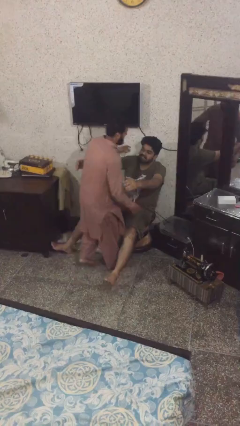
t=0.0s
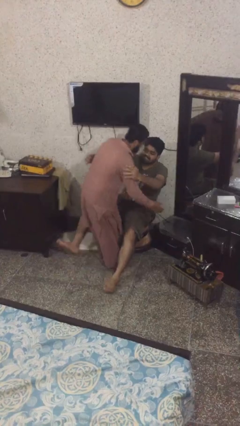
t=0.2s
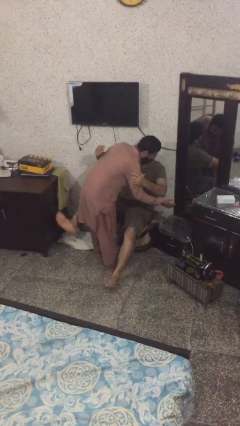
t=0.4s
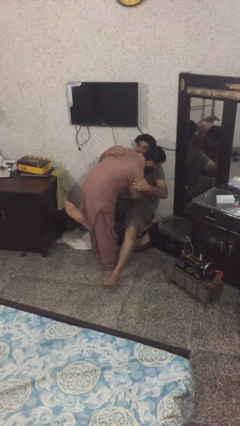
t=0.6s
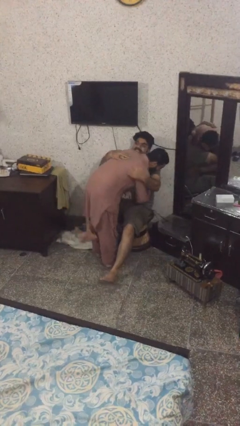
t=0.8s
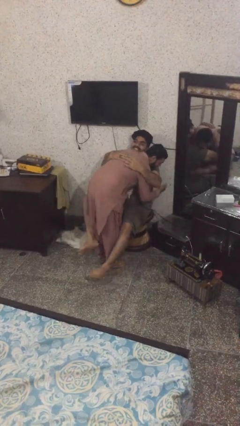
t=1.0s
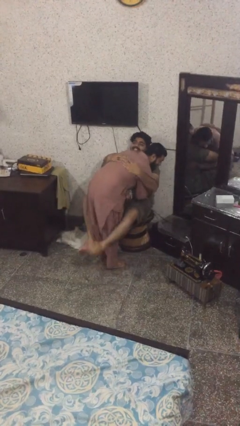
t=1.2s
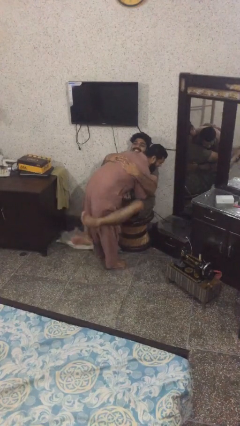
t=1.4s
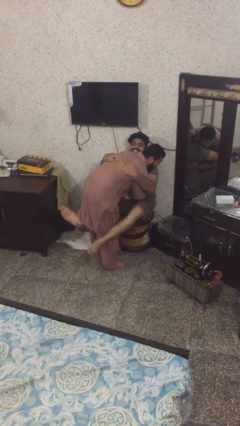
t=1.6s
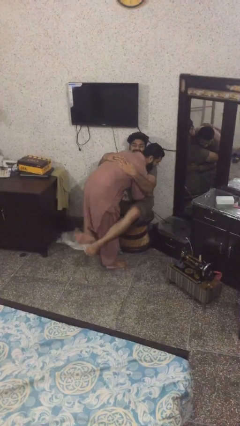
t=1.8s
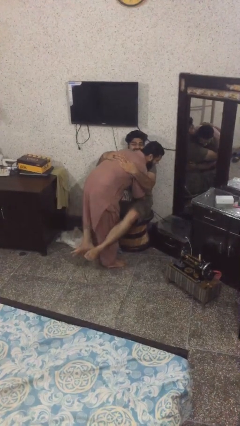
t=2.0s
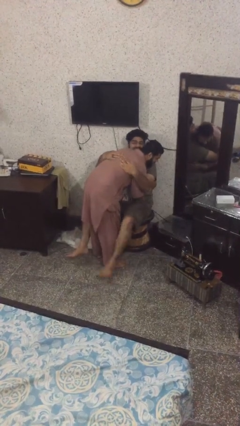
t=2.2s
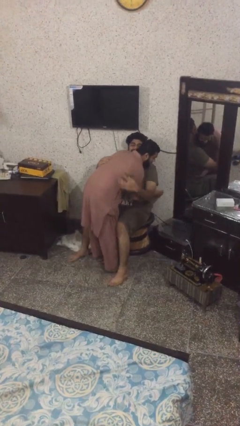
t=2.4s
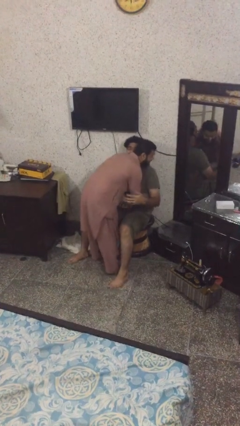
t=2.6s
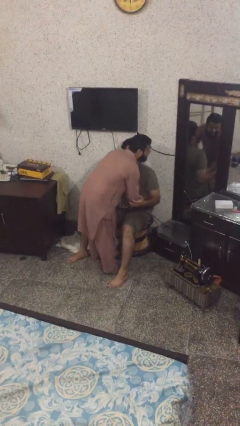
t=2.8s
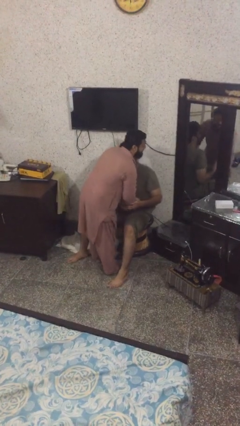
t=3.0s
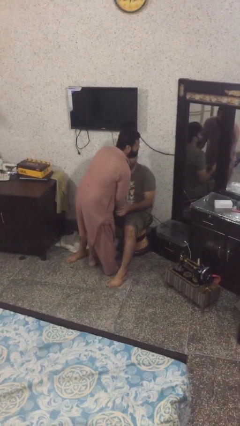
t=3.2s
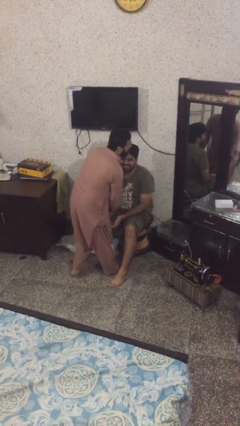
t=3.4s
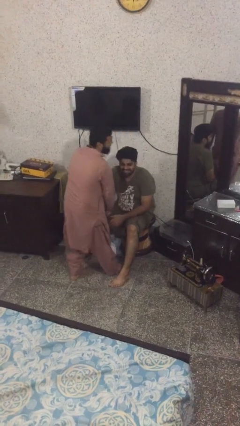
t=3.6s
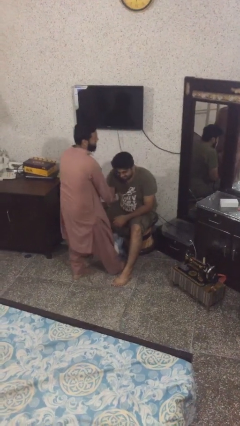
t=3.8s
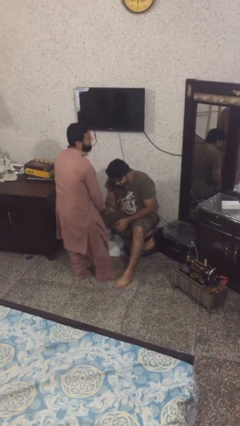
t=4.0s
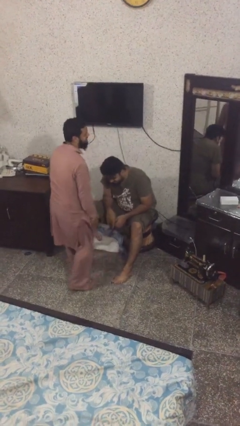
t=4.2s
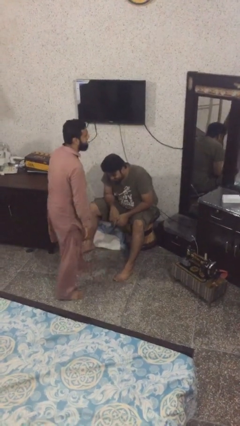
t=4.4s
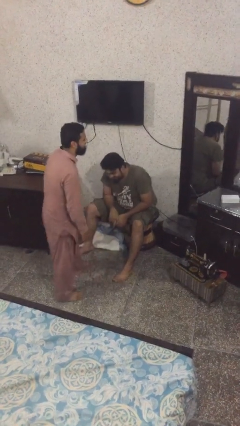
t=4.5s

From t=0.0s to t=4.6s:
person embraces person

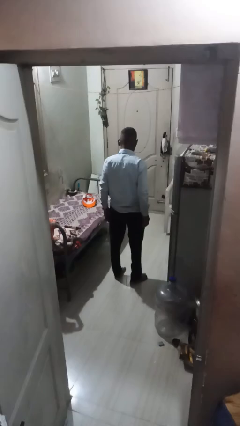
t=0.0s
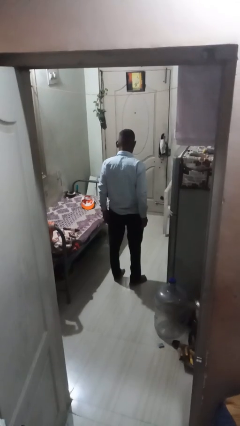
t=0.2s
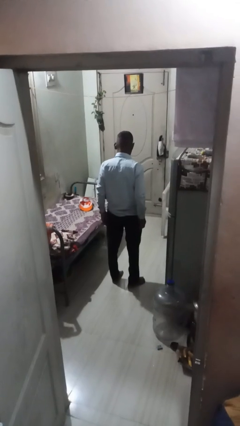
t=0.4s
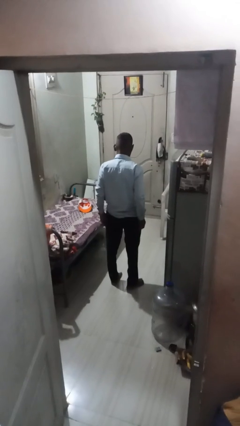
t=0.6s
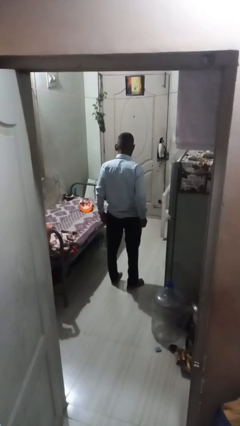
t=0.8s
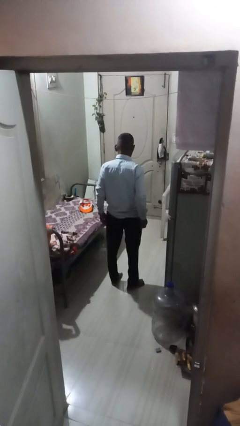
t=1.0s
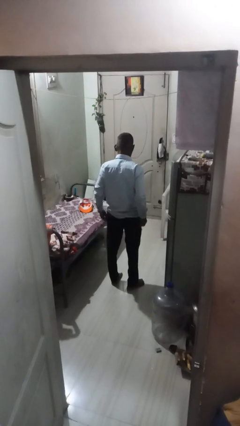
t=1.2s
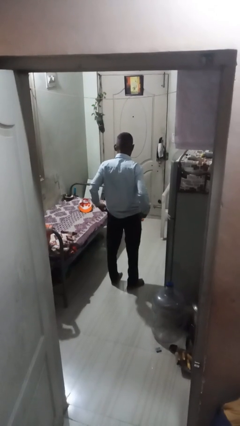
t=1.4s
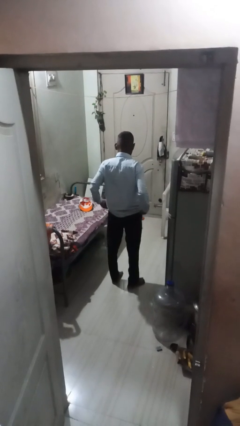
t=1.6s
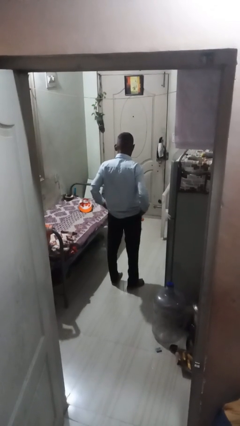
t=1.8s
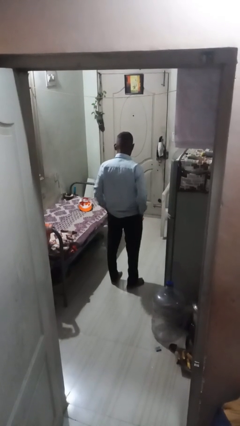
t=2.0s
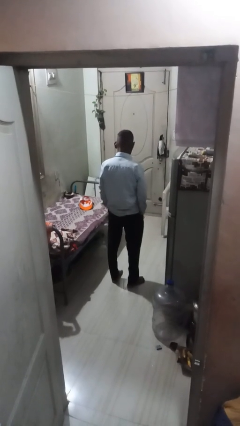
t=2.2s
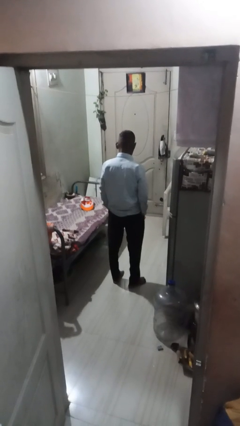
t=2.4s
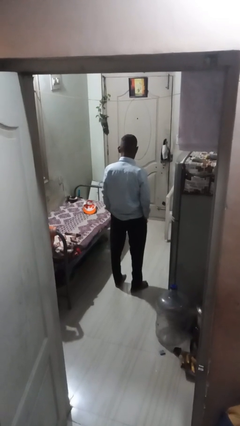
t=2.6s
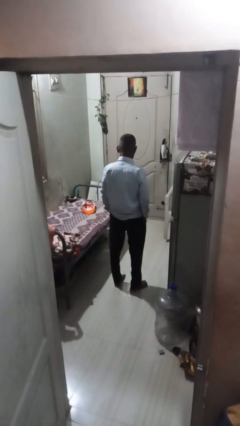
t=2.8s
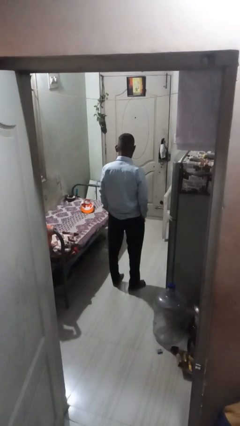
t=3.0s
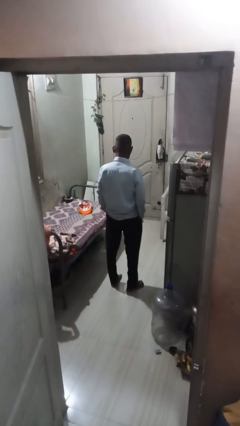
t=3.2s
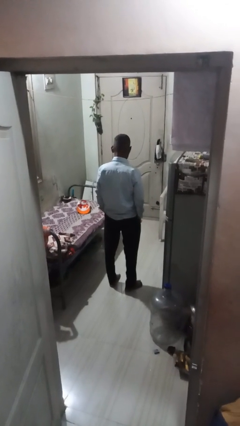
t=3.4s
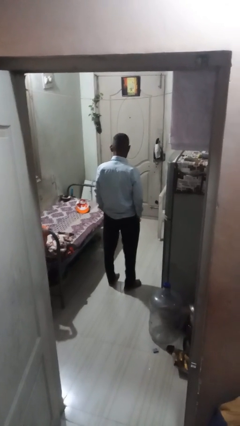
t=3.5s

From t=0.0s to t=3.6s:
person puts hands in back pockets

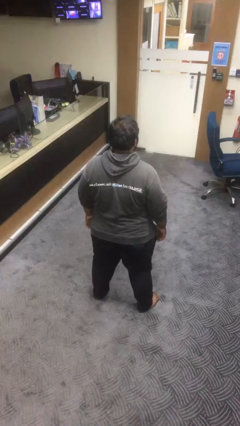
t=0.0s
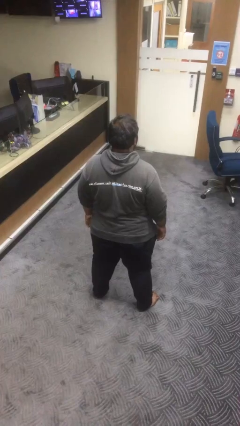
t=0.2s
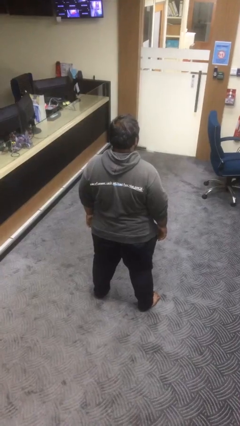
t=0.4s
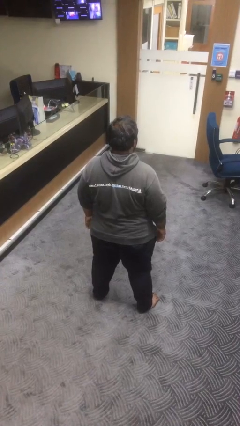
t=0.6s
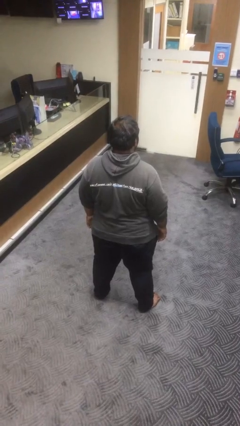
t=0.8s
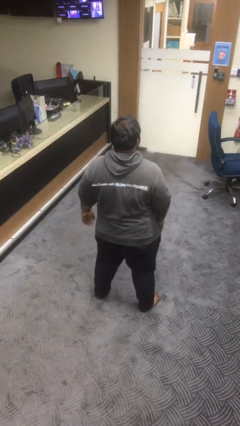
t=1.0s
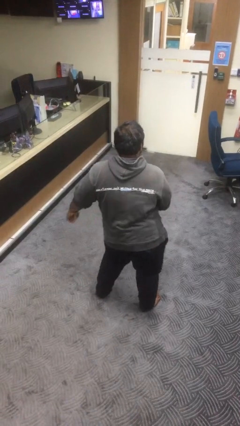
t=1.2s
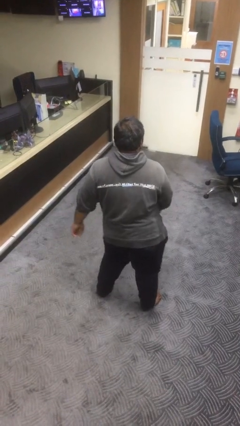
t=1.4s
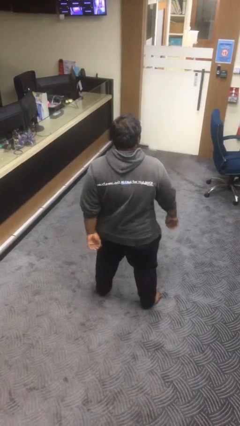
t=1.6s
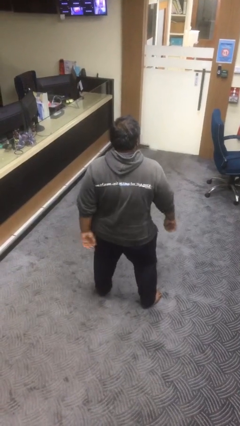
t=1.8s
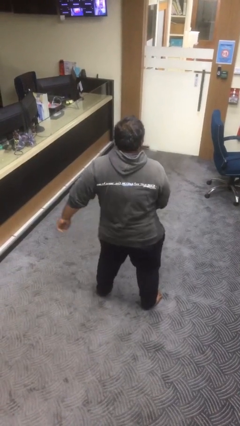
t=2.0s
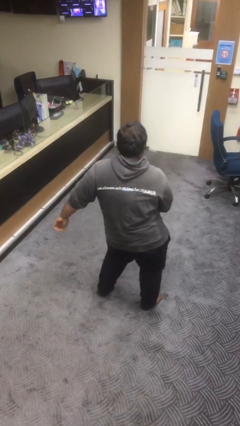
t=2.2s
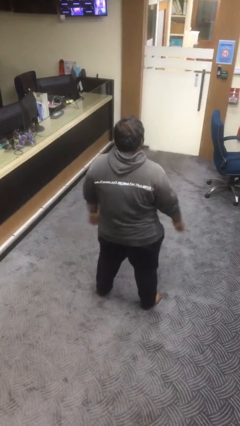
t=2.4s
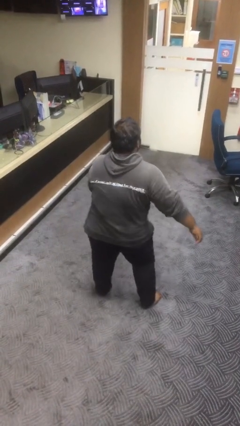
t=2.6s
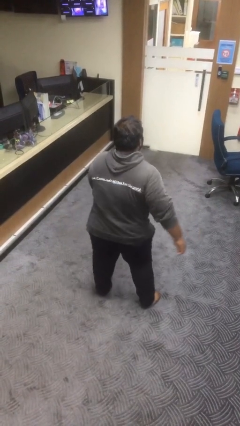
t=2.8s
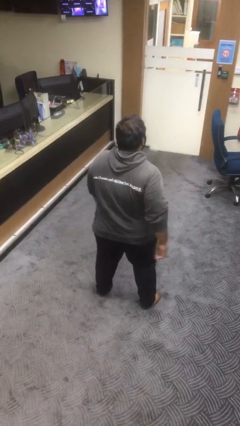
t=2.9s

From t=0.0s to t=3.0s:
person dances in place

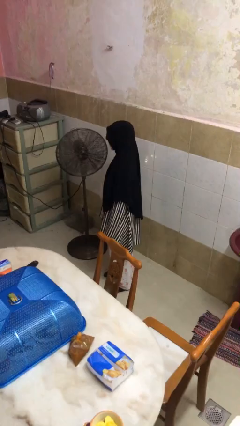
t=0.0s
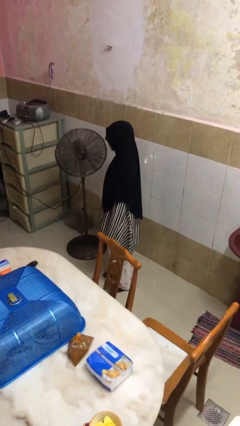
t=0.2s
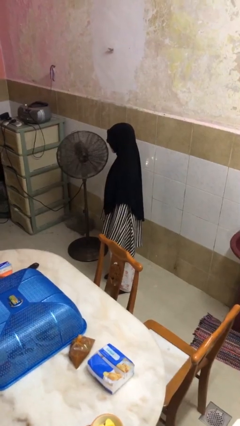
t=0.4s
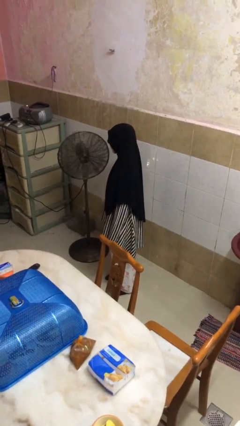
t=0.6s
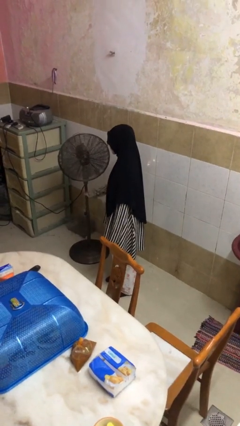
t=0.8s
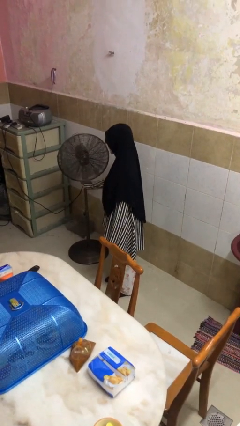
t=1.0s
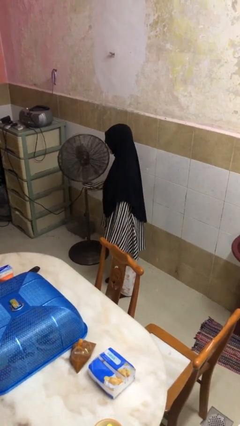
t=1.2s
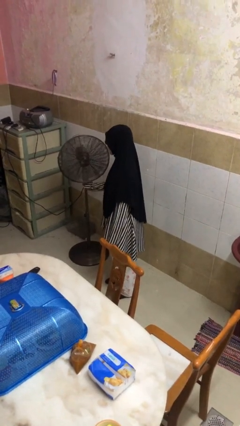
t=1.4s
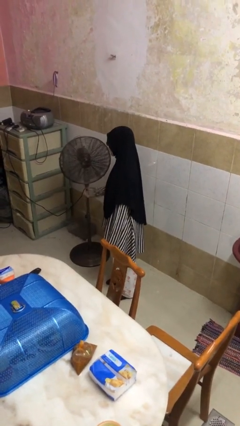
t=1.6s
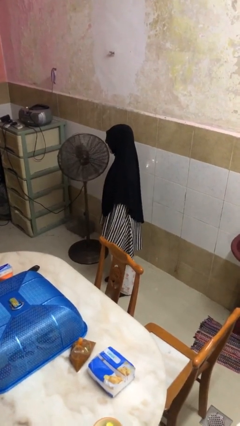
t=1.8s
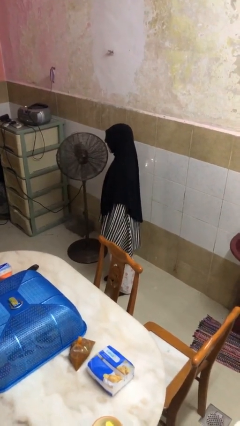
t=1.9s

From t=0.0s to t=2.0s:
person turns off fan

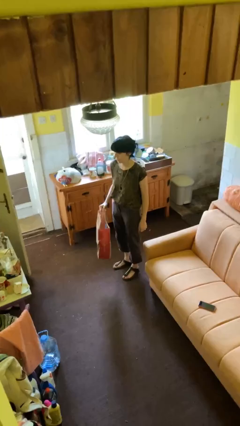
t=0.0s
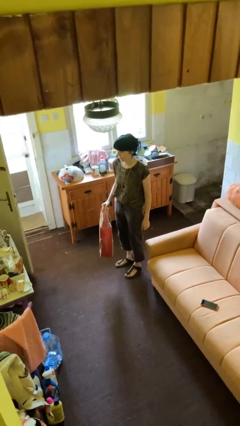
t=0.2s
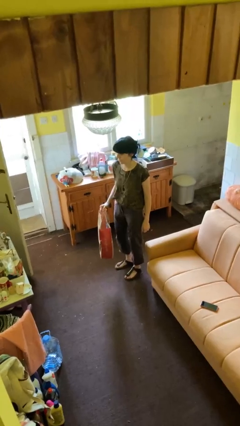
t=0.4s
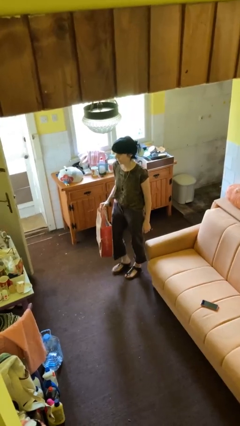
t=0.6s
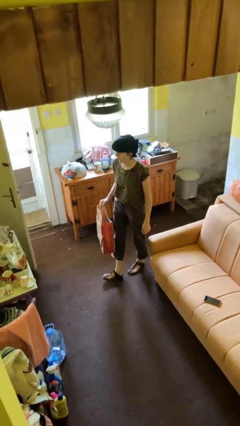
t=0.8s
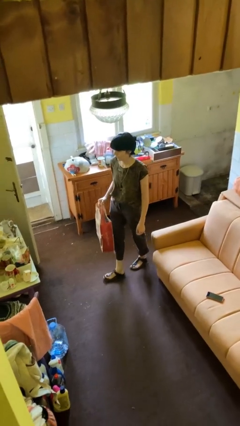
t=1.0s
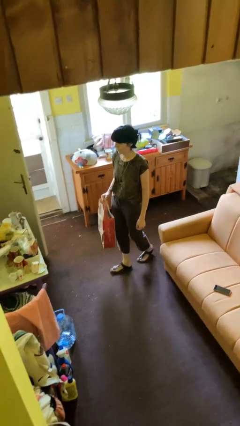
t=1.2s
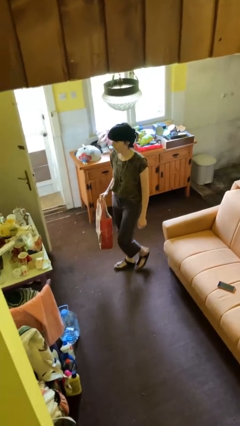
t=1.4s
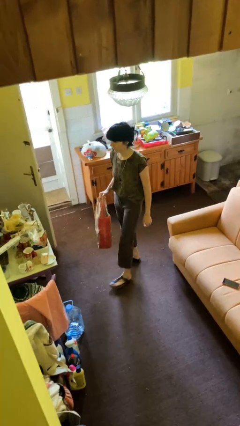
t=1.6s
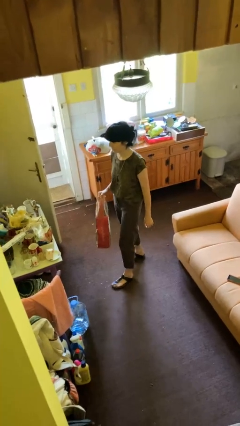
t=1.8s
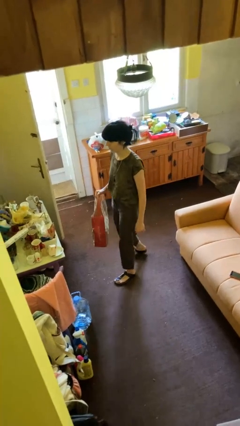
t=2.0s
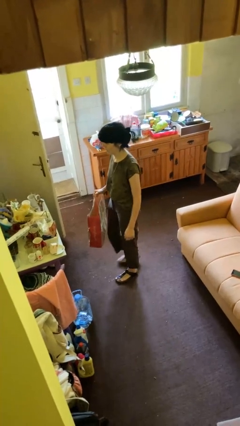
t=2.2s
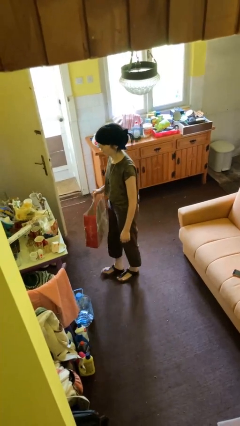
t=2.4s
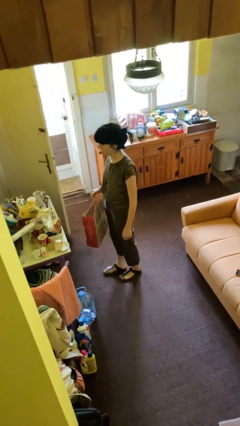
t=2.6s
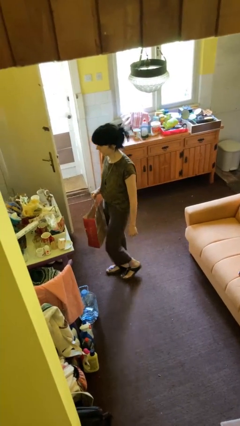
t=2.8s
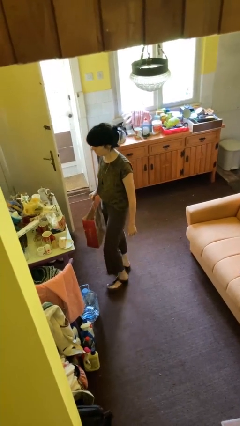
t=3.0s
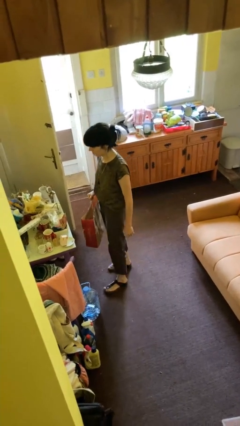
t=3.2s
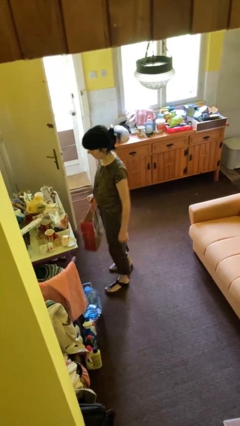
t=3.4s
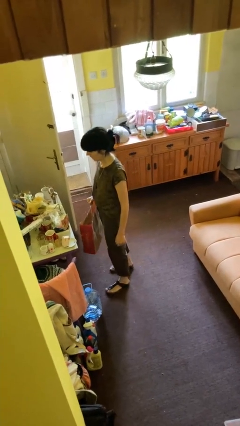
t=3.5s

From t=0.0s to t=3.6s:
person carries groceries

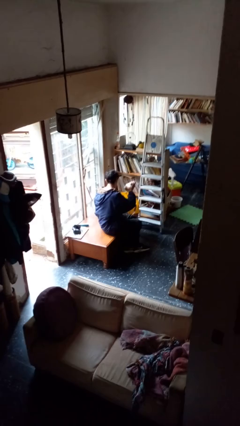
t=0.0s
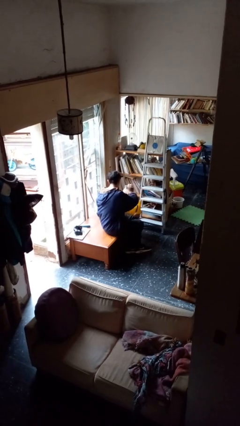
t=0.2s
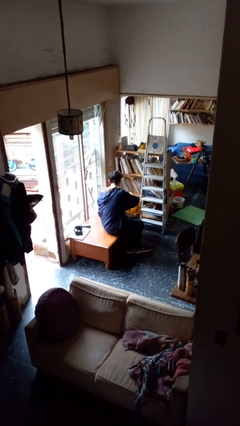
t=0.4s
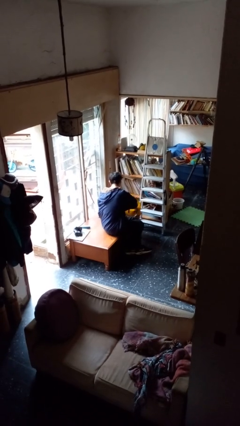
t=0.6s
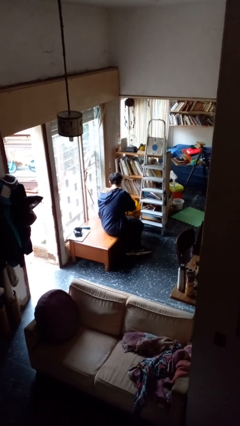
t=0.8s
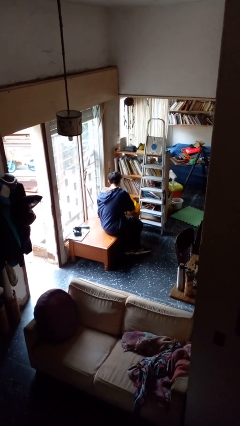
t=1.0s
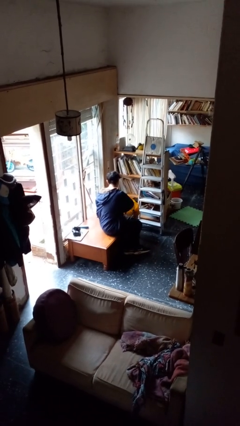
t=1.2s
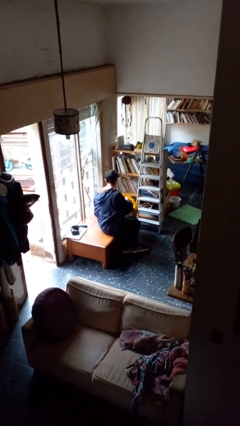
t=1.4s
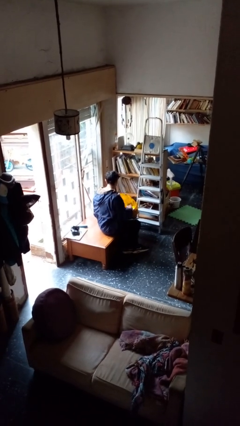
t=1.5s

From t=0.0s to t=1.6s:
person puts object into bag
